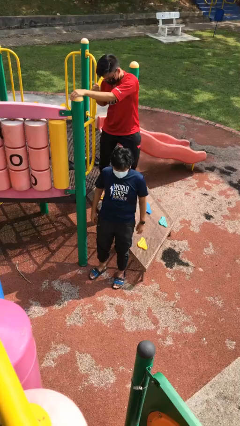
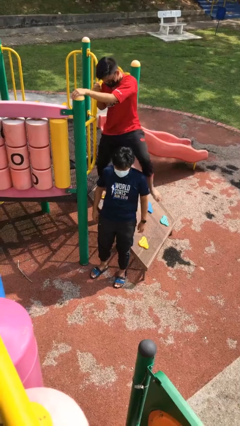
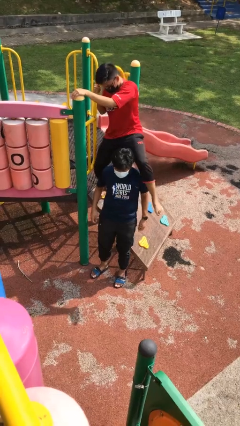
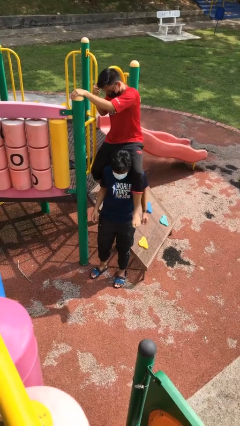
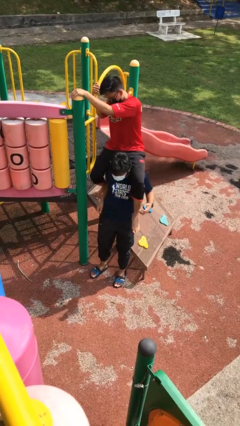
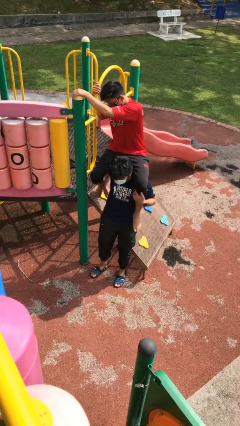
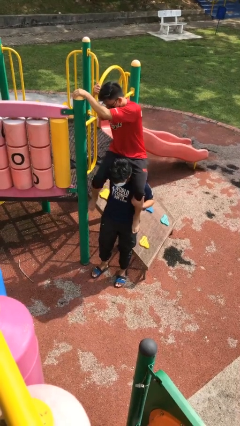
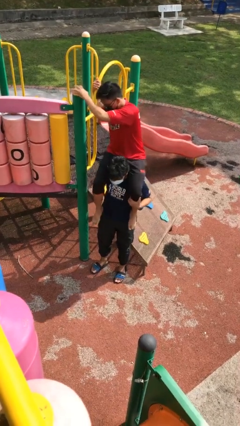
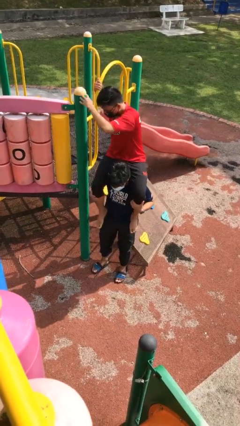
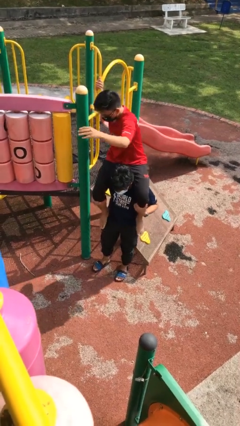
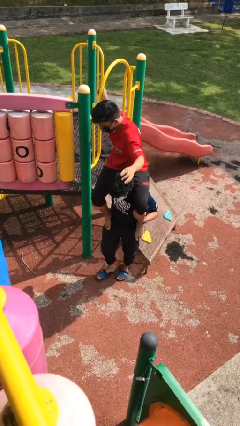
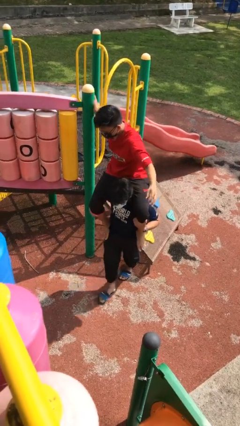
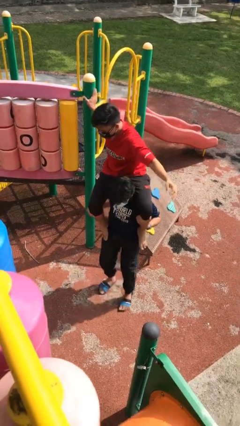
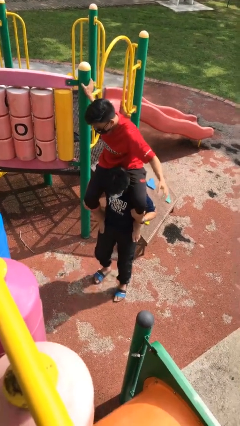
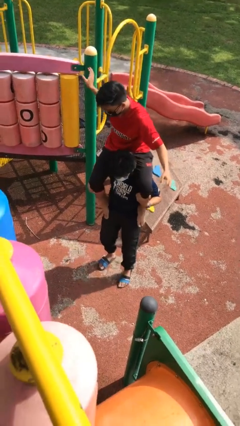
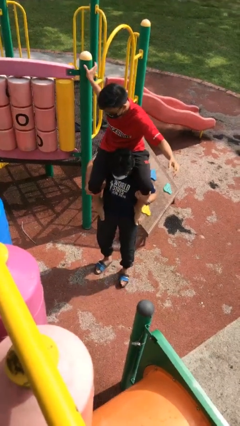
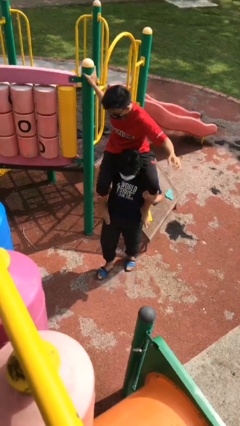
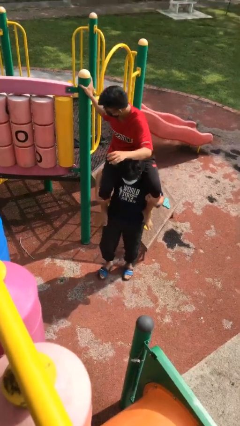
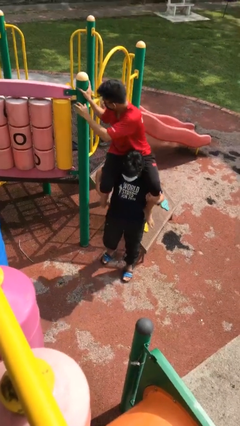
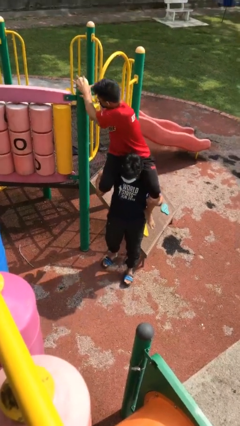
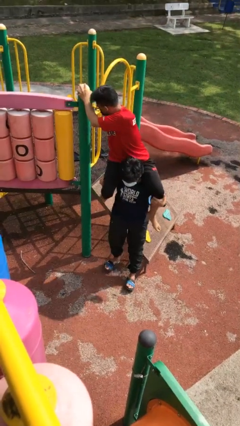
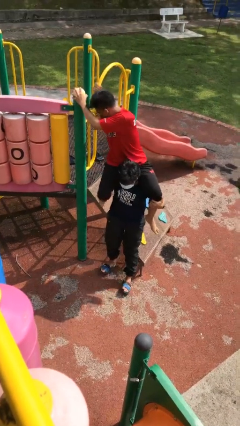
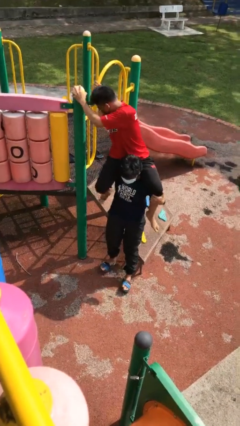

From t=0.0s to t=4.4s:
person carries person on shoulders

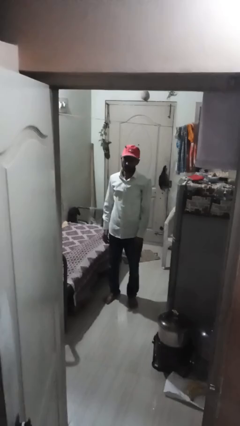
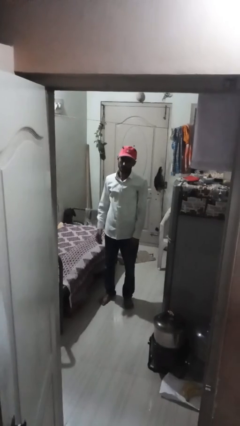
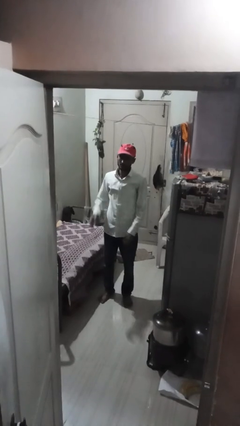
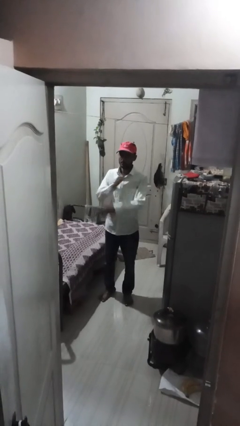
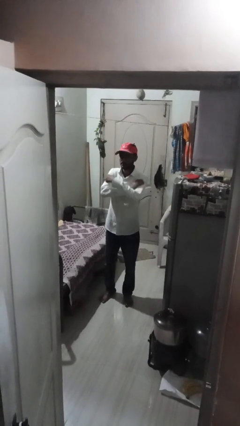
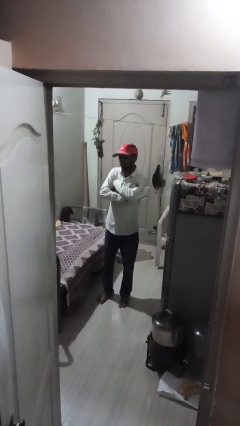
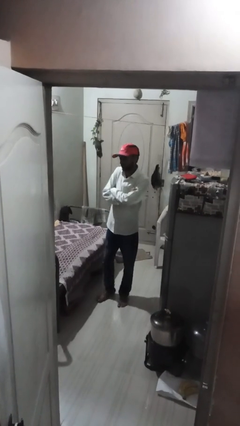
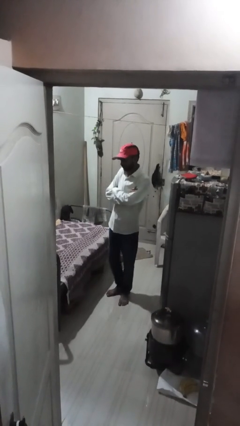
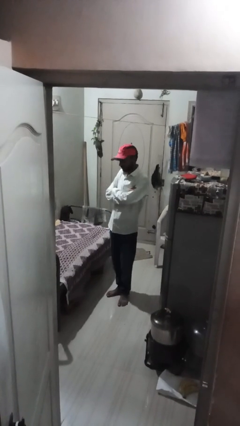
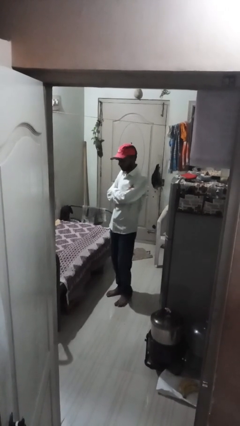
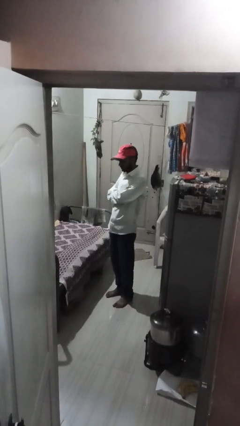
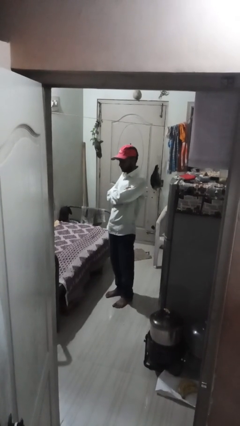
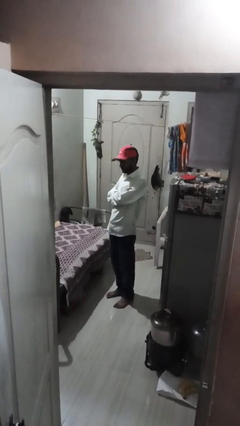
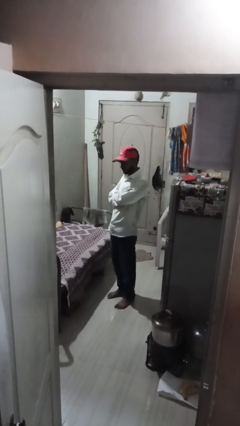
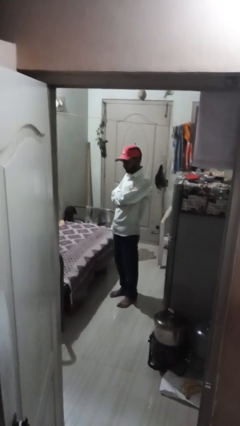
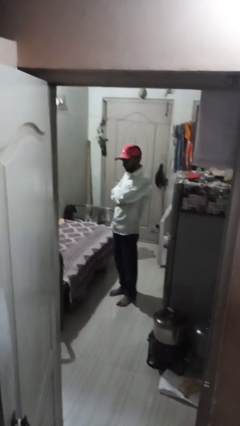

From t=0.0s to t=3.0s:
person crosses arms

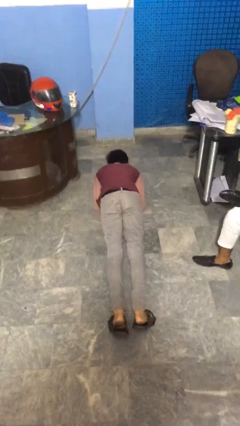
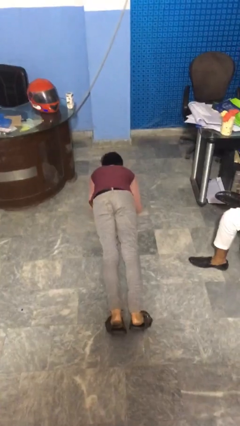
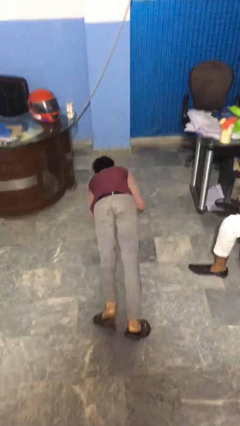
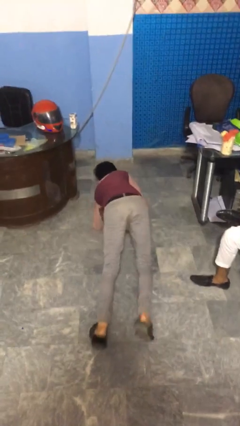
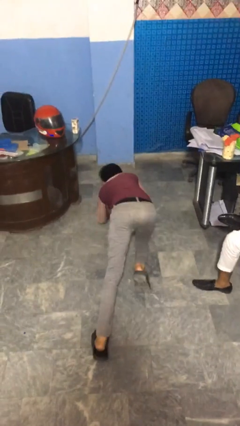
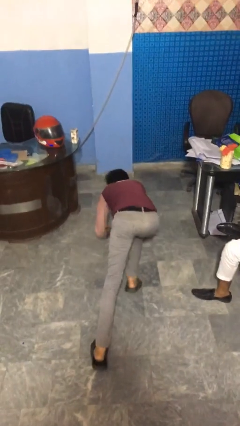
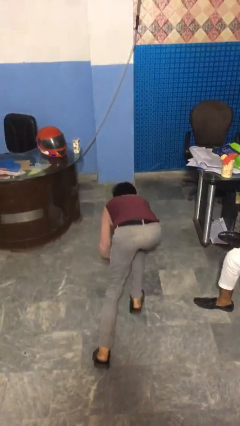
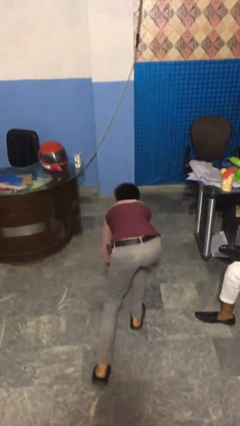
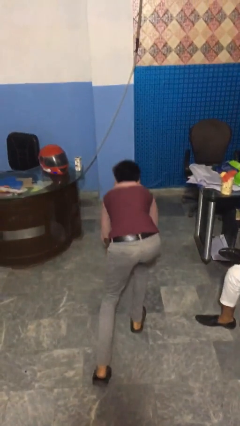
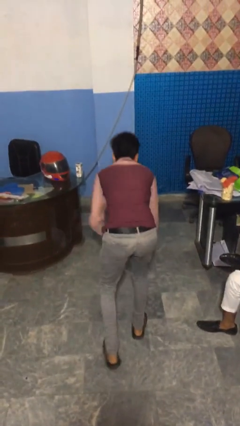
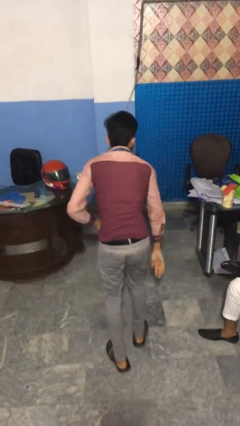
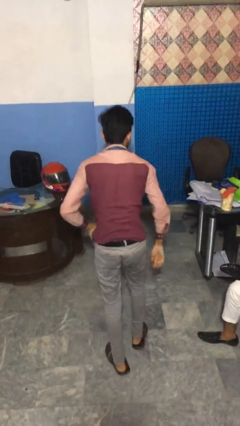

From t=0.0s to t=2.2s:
person stands up from floor

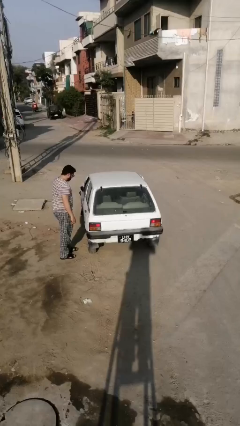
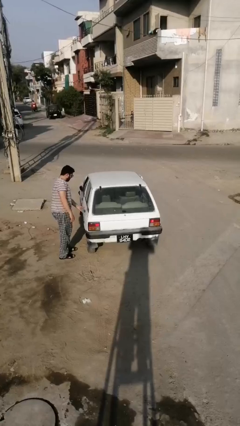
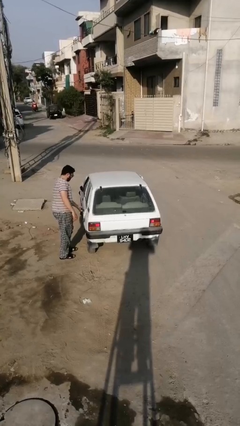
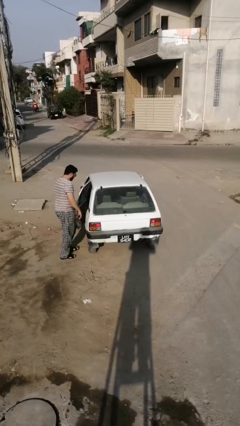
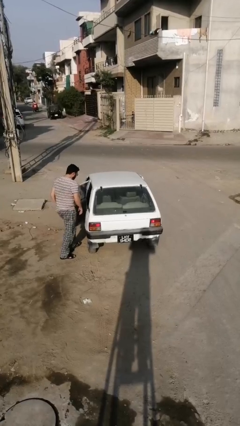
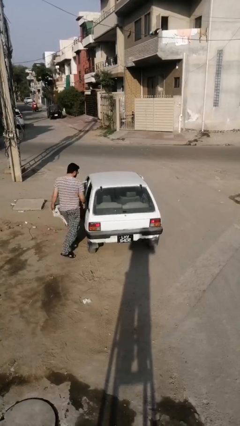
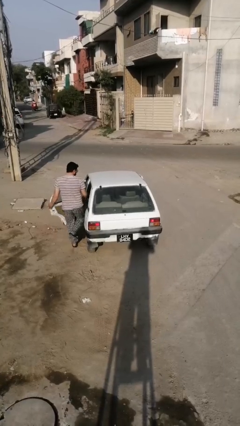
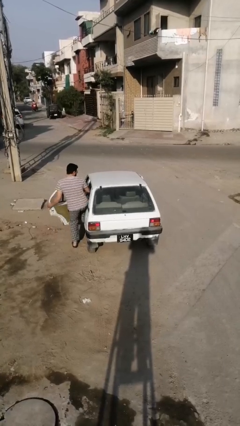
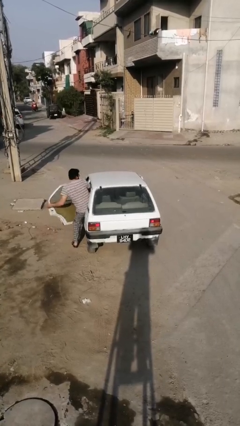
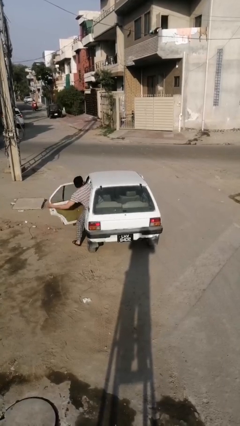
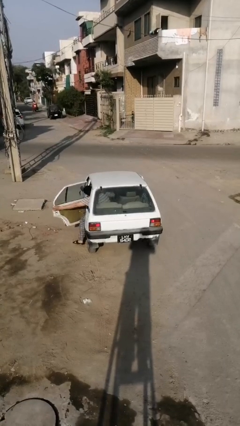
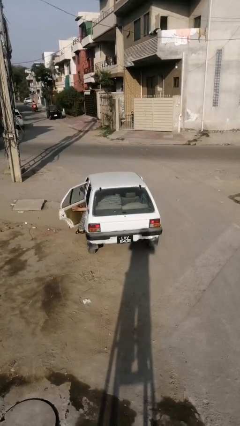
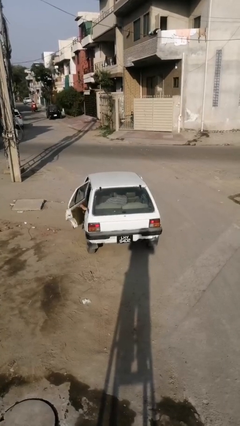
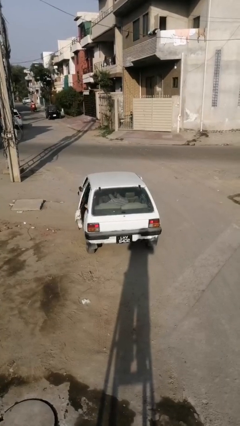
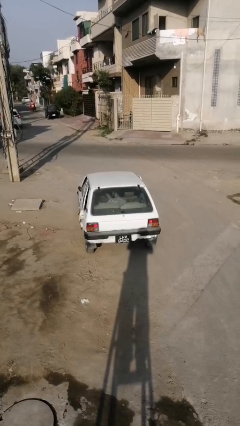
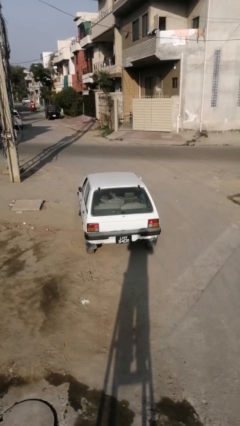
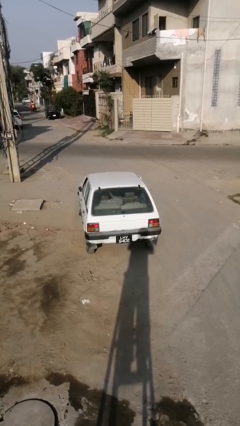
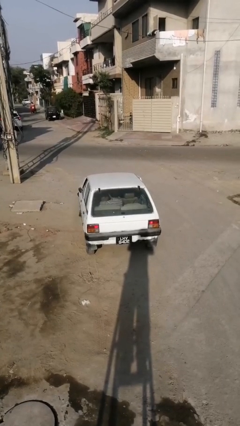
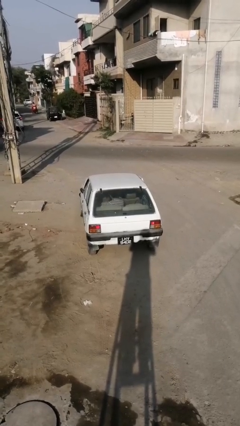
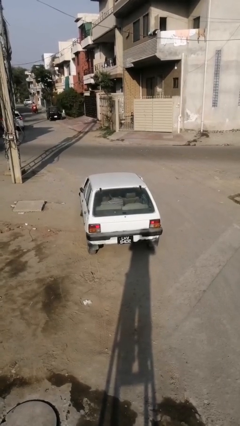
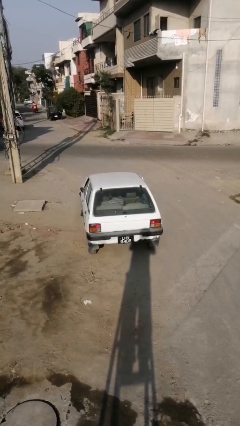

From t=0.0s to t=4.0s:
car picks up person

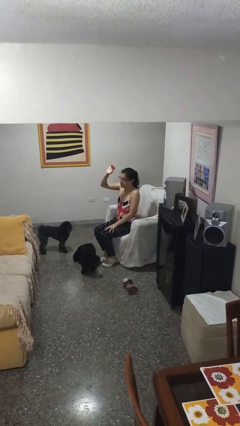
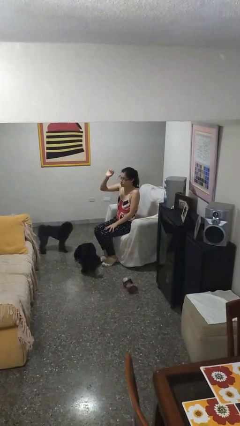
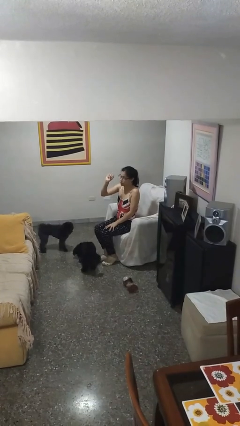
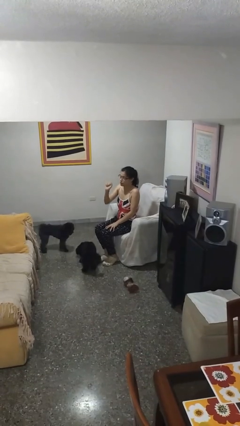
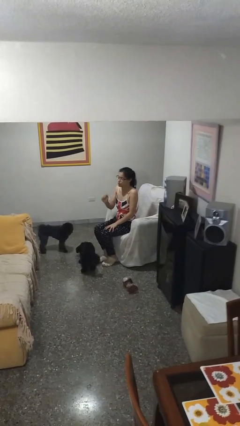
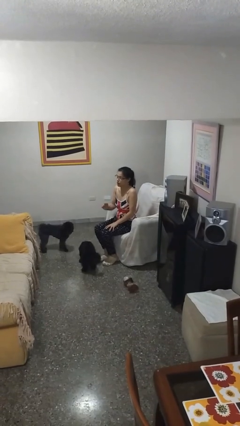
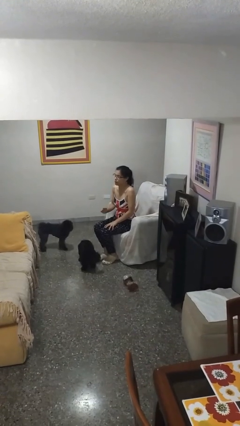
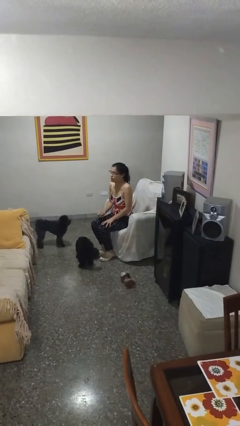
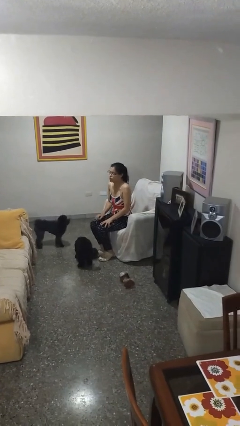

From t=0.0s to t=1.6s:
person gestures lower hand

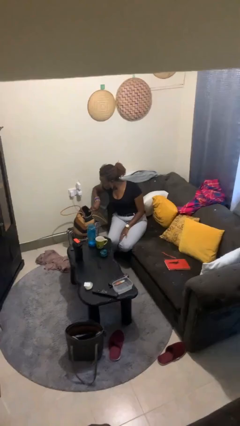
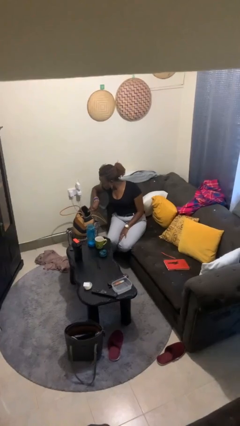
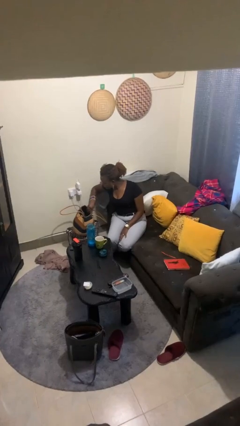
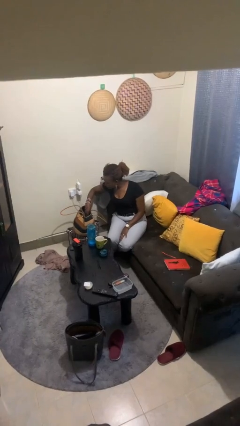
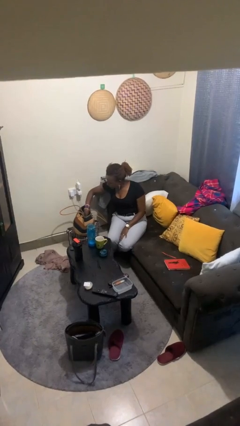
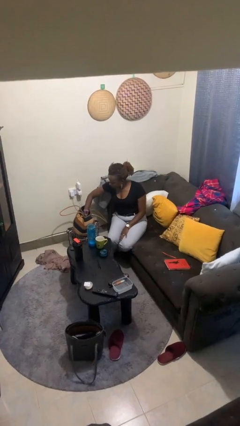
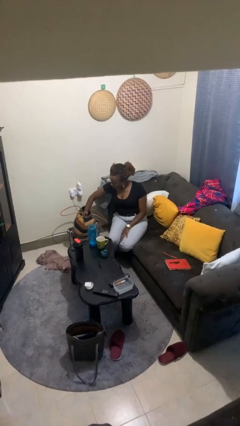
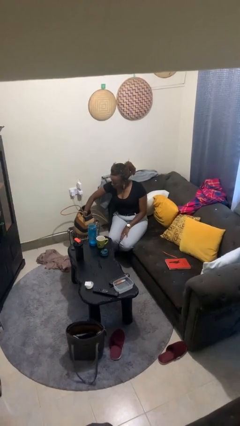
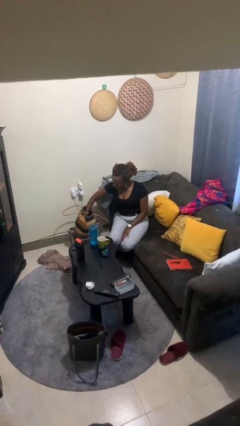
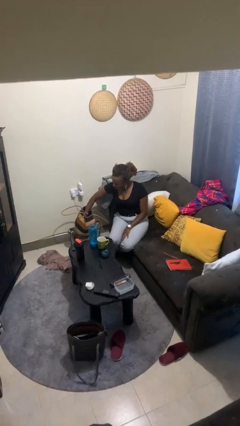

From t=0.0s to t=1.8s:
person takes object from purse

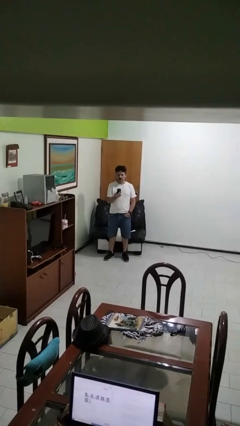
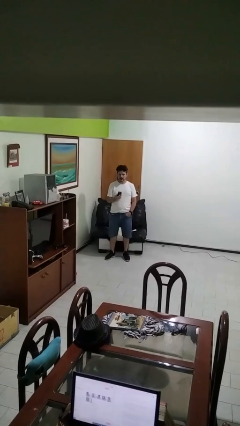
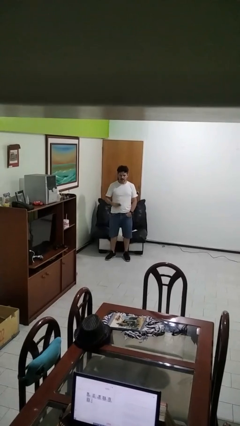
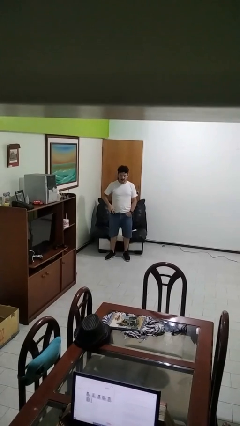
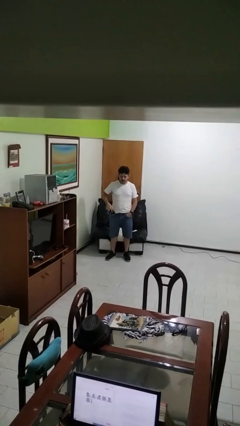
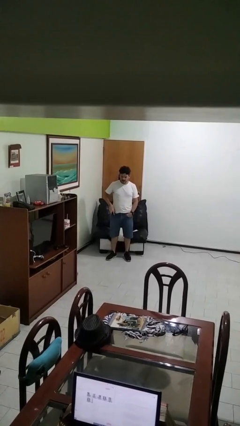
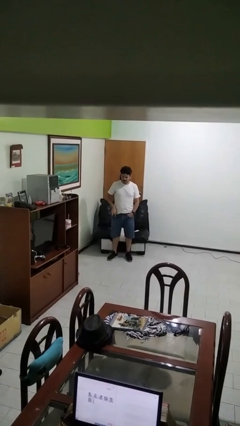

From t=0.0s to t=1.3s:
person puts phone into pocket
